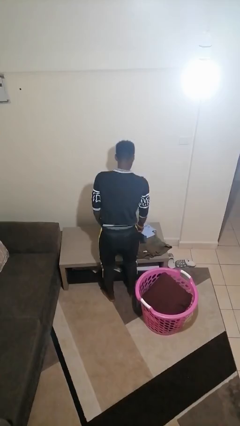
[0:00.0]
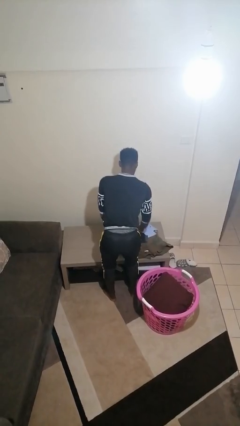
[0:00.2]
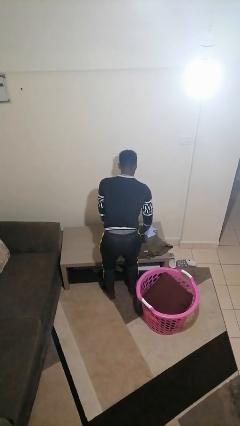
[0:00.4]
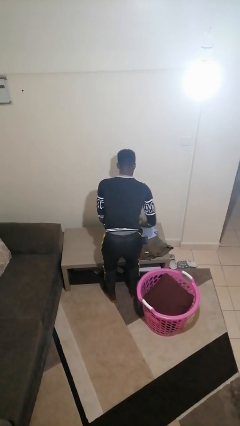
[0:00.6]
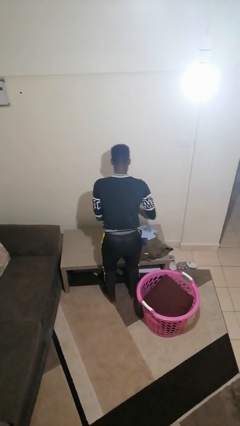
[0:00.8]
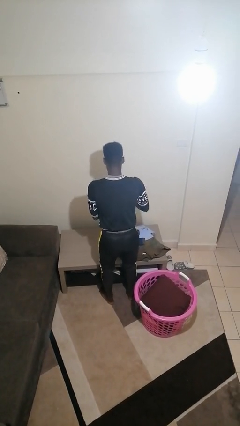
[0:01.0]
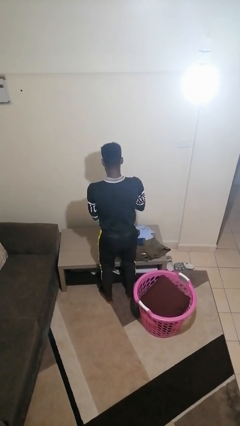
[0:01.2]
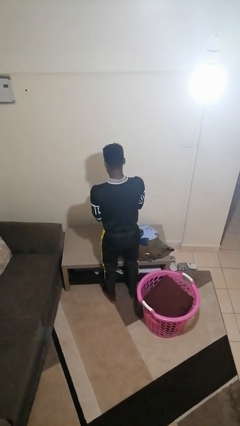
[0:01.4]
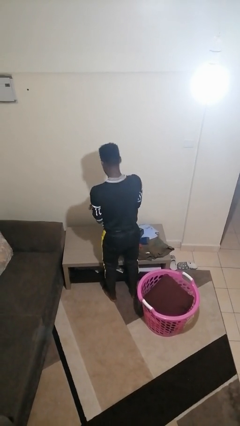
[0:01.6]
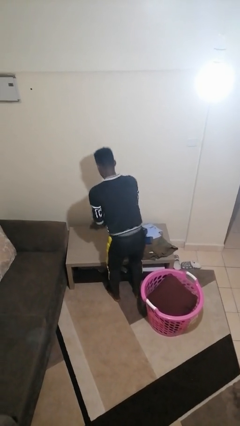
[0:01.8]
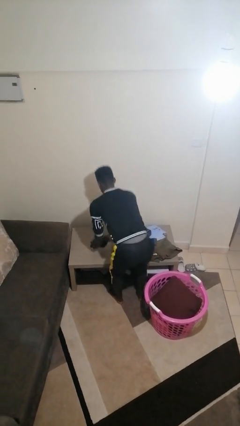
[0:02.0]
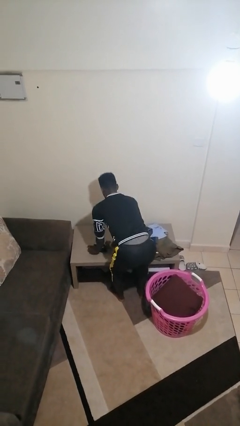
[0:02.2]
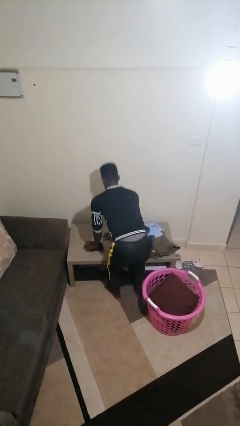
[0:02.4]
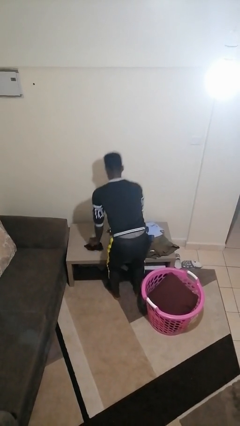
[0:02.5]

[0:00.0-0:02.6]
person folds socks

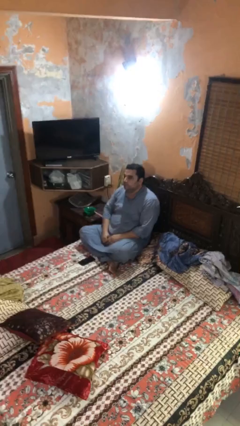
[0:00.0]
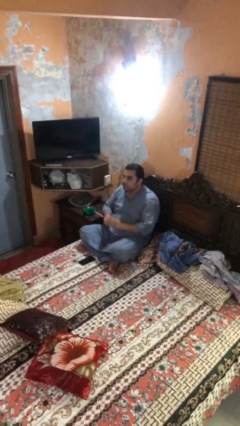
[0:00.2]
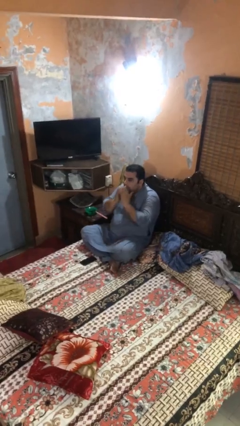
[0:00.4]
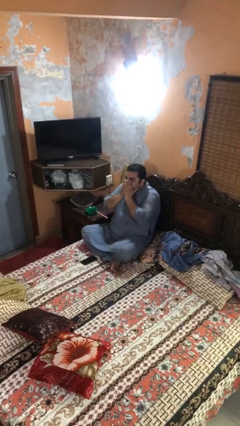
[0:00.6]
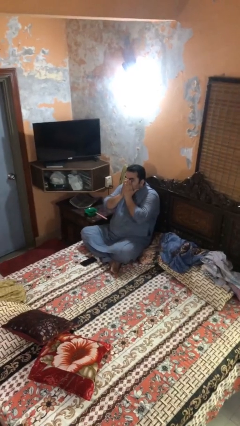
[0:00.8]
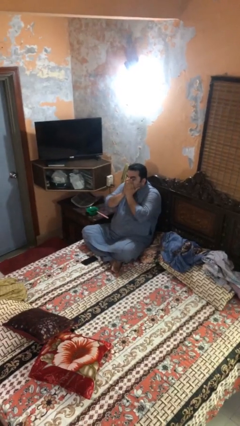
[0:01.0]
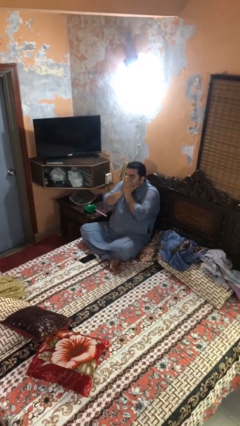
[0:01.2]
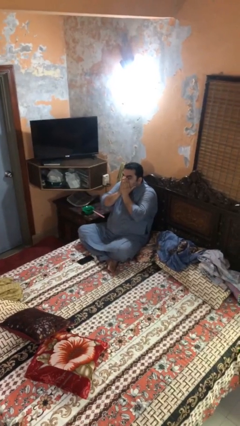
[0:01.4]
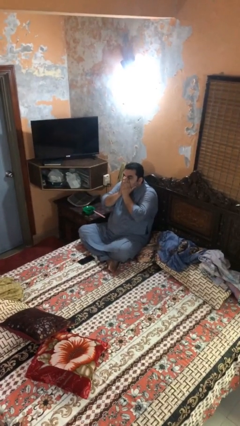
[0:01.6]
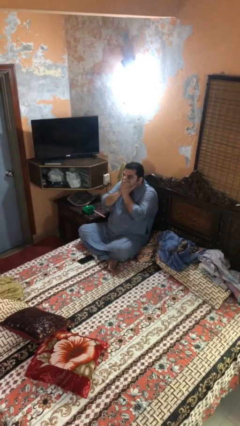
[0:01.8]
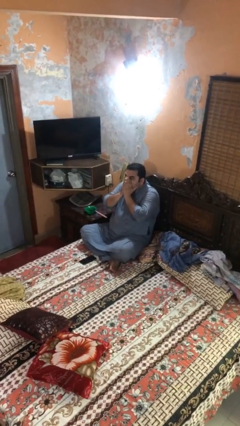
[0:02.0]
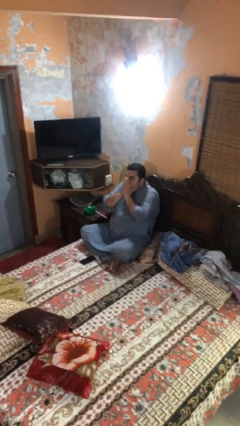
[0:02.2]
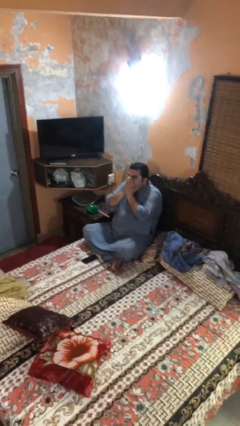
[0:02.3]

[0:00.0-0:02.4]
person covers face with hands

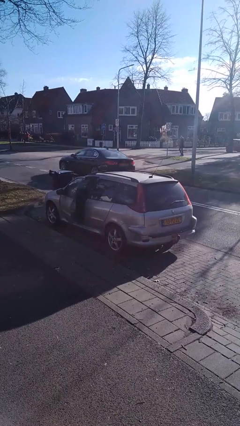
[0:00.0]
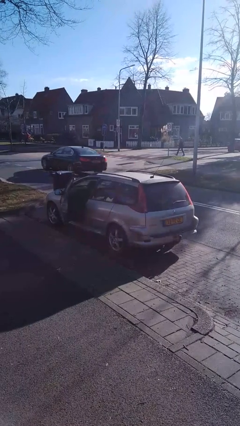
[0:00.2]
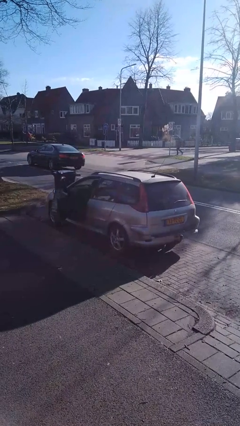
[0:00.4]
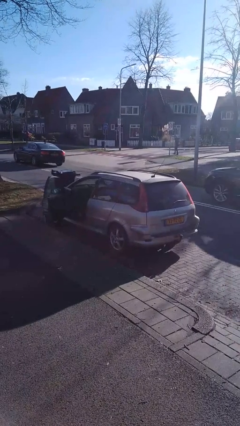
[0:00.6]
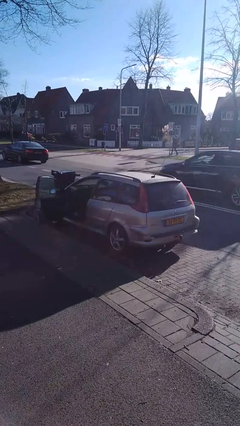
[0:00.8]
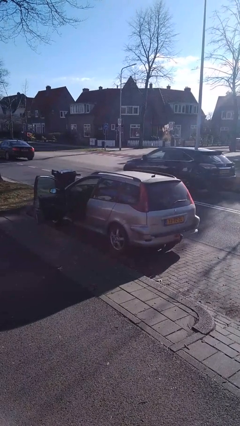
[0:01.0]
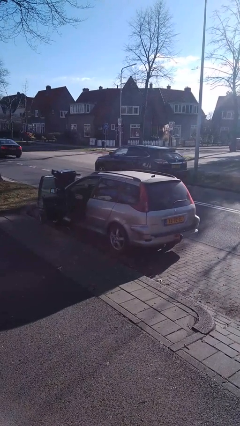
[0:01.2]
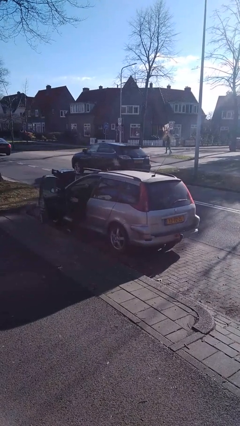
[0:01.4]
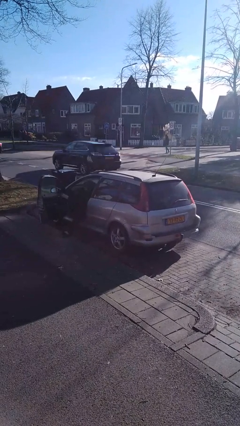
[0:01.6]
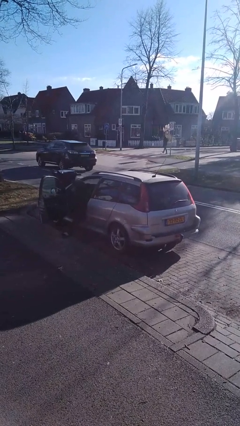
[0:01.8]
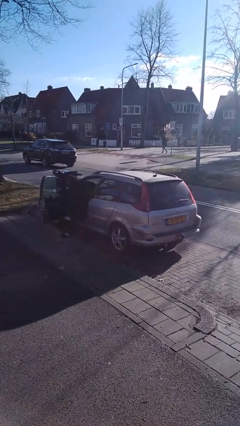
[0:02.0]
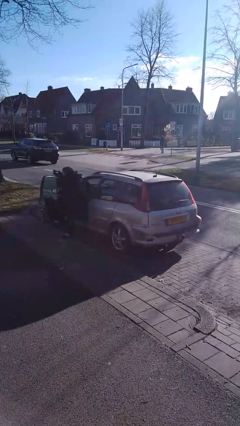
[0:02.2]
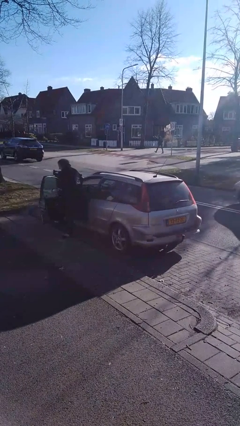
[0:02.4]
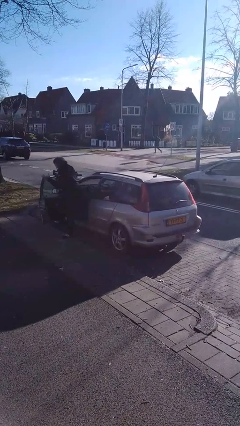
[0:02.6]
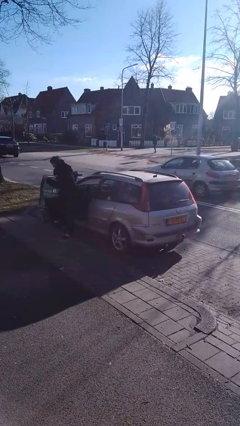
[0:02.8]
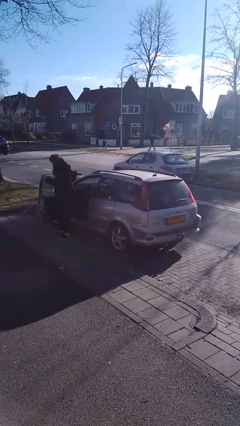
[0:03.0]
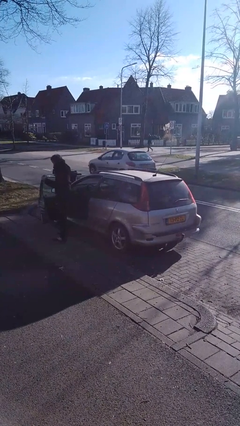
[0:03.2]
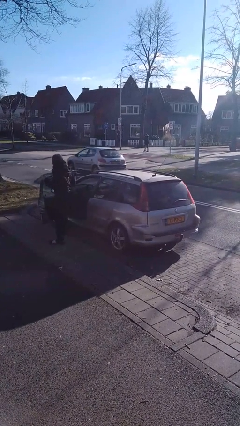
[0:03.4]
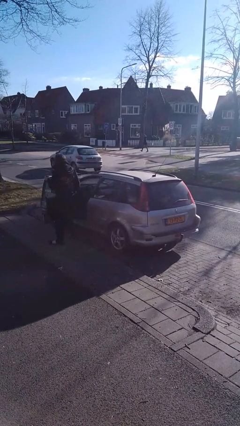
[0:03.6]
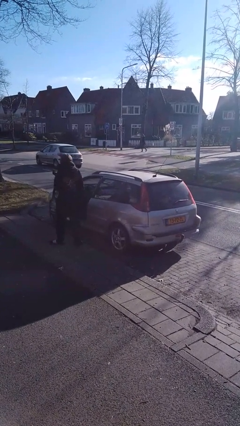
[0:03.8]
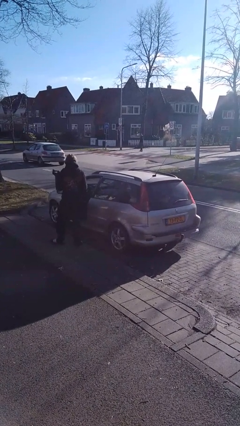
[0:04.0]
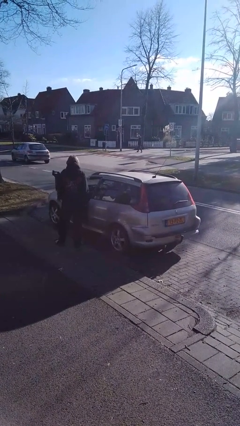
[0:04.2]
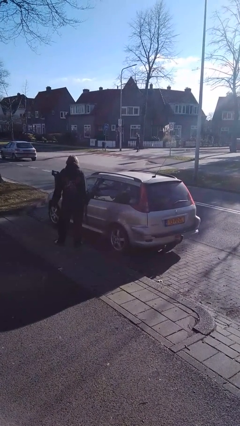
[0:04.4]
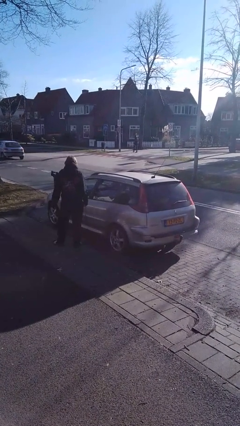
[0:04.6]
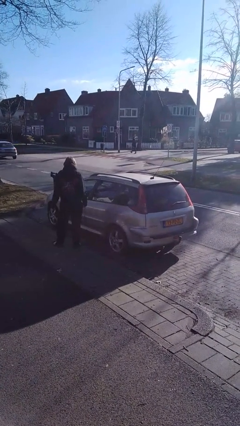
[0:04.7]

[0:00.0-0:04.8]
car drops off person

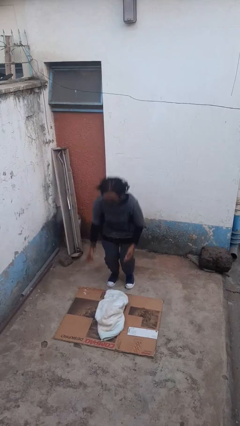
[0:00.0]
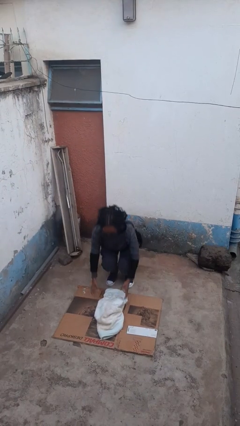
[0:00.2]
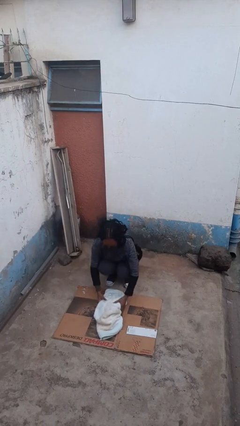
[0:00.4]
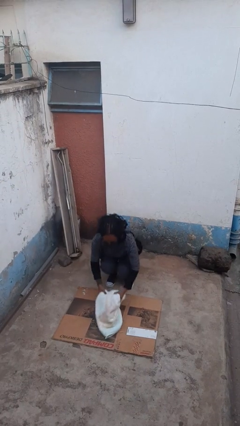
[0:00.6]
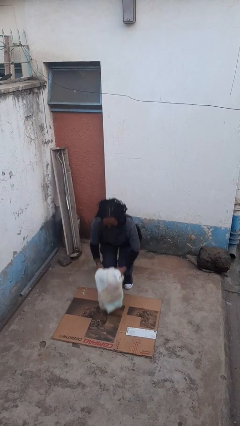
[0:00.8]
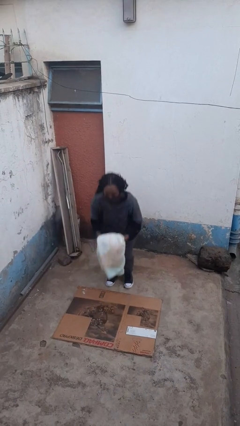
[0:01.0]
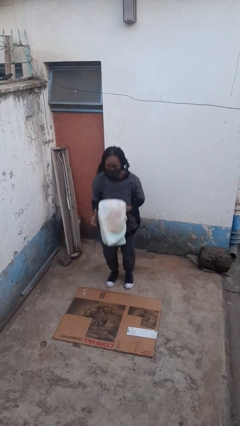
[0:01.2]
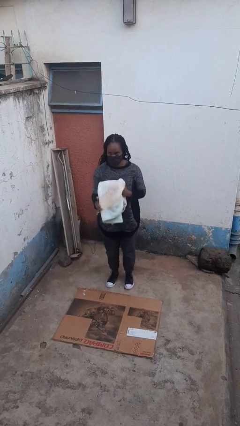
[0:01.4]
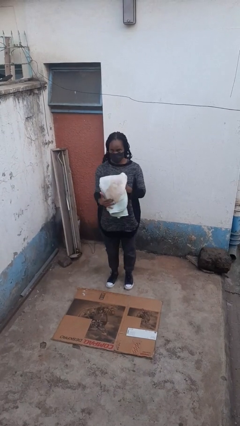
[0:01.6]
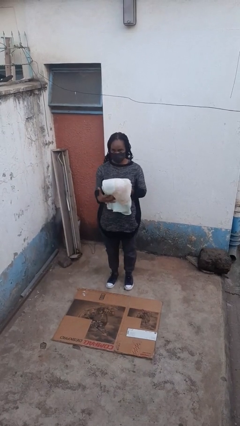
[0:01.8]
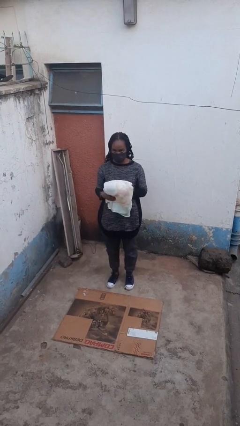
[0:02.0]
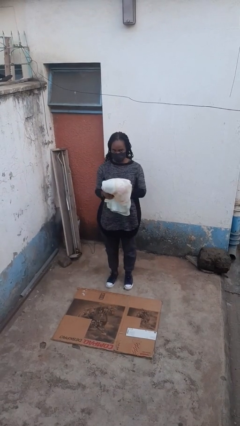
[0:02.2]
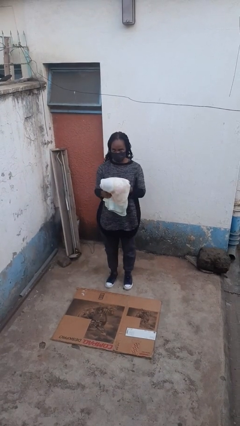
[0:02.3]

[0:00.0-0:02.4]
person picks up object from floor

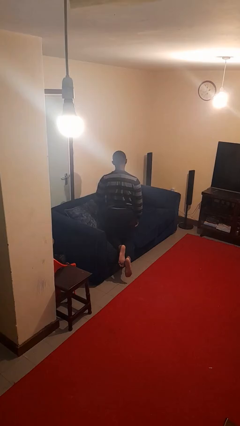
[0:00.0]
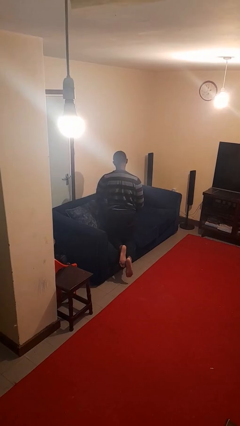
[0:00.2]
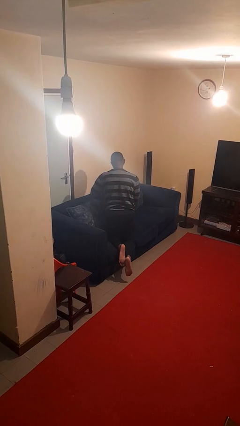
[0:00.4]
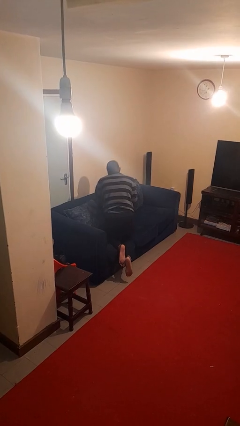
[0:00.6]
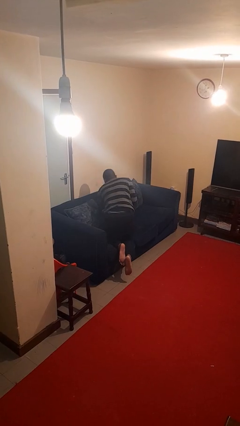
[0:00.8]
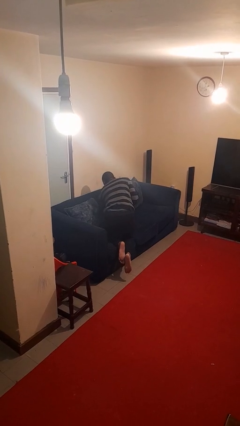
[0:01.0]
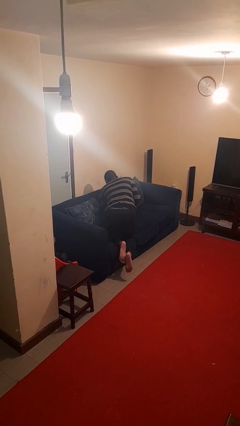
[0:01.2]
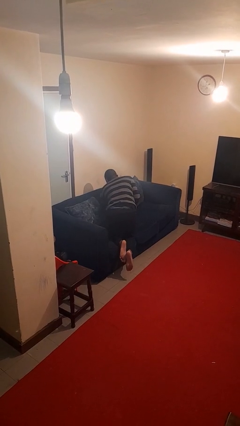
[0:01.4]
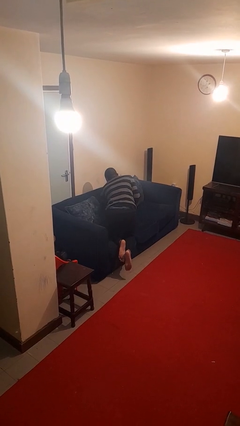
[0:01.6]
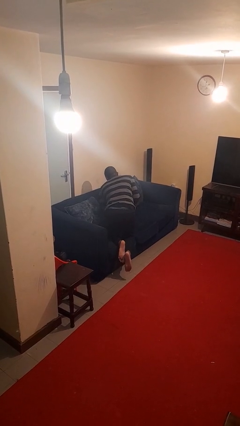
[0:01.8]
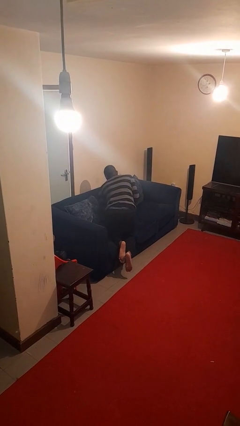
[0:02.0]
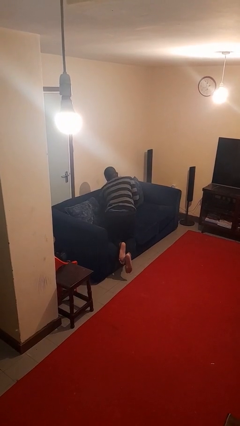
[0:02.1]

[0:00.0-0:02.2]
person searches in couch

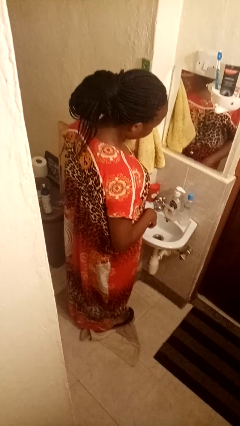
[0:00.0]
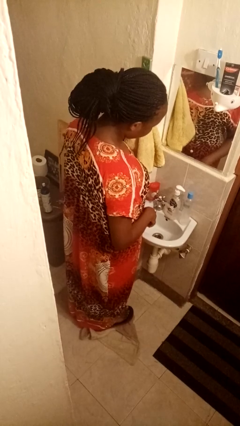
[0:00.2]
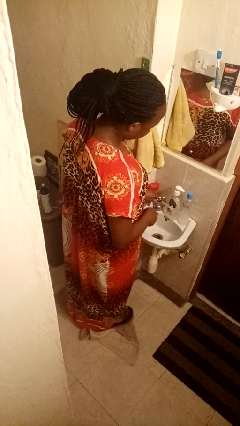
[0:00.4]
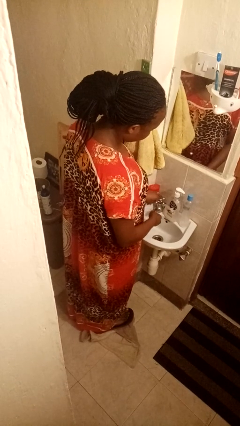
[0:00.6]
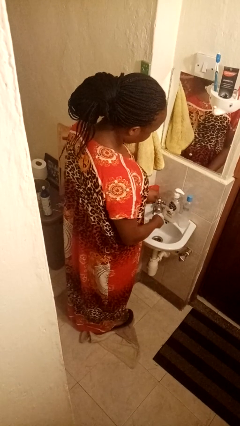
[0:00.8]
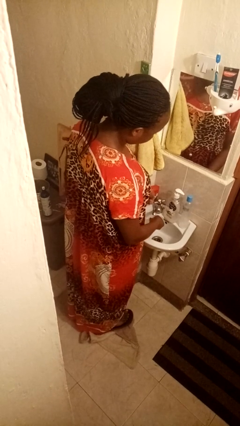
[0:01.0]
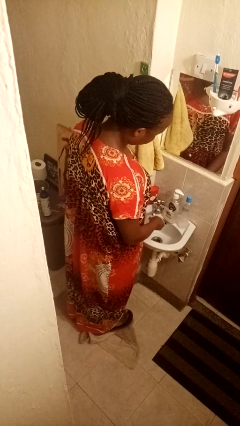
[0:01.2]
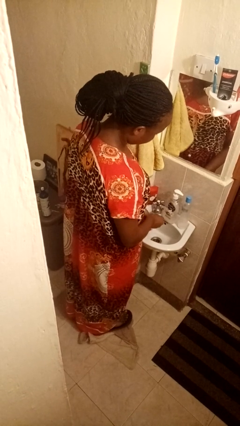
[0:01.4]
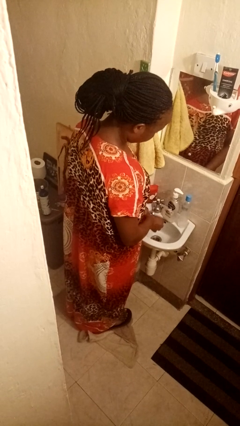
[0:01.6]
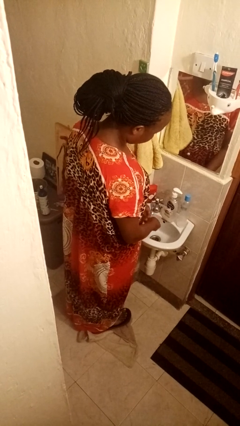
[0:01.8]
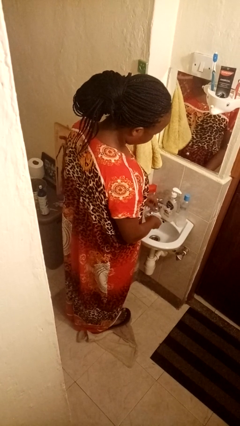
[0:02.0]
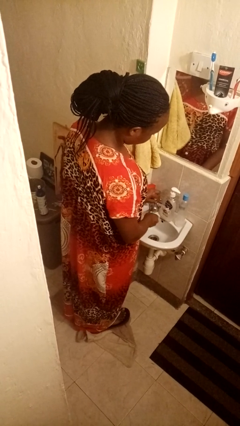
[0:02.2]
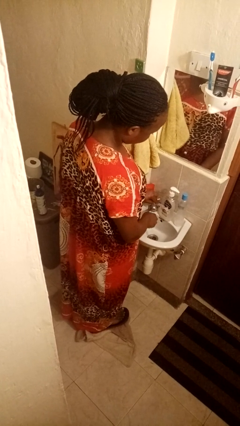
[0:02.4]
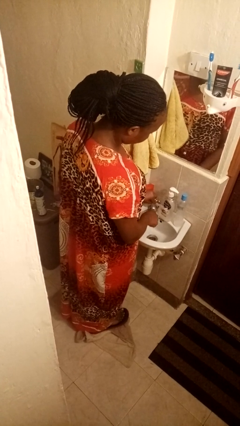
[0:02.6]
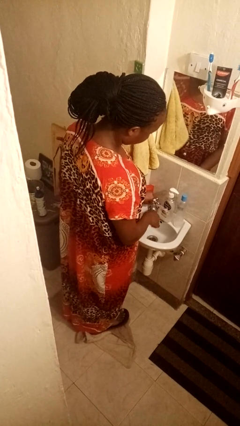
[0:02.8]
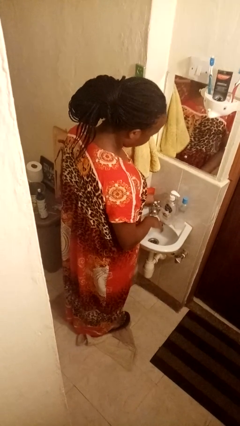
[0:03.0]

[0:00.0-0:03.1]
person washes hands
